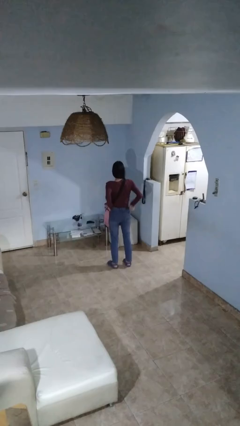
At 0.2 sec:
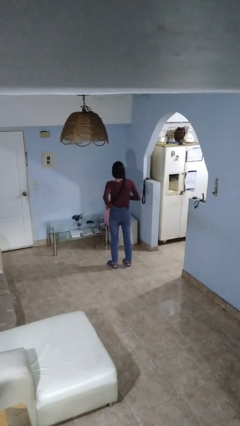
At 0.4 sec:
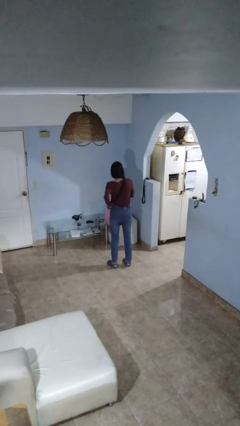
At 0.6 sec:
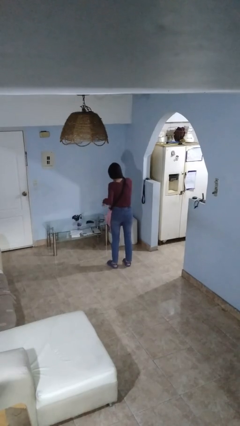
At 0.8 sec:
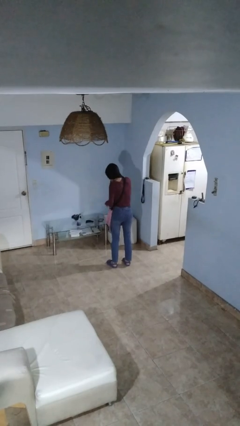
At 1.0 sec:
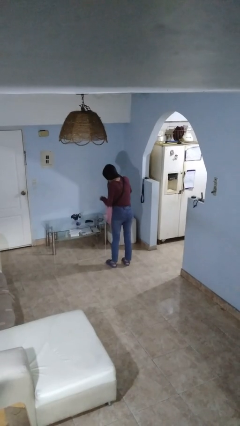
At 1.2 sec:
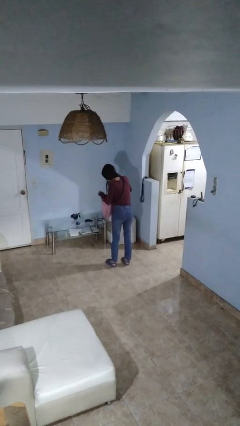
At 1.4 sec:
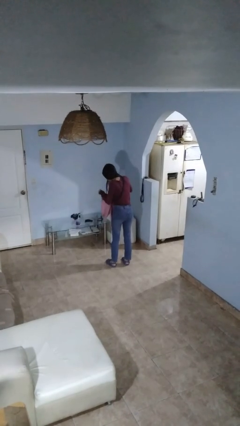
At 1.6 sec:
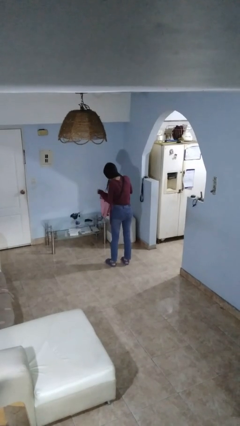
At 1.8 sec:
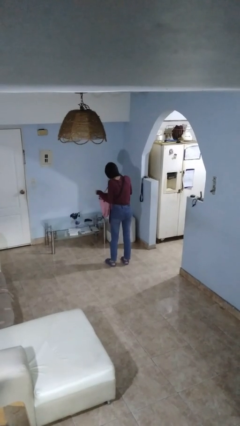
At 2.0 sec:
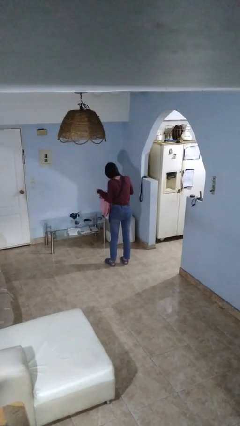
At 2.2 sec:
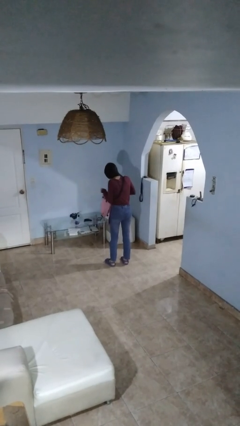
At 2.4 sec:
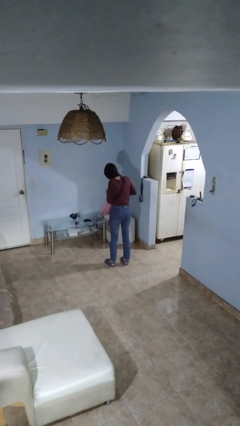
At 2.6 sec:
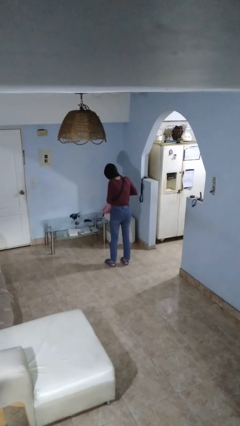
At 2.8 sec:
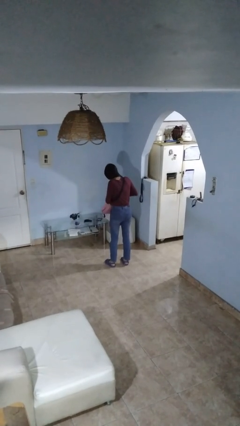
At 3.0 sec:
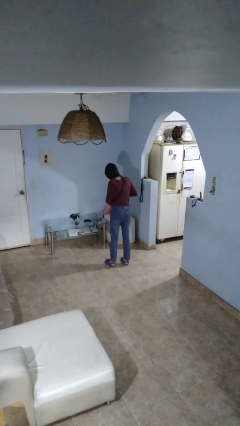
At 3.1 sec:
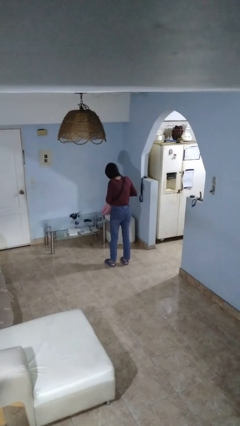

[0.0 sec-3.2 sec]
person searches in backpack

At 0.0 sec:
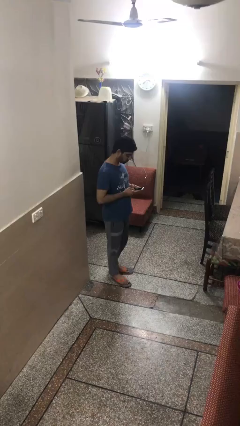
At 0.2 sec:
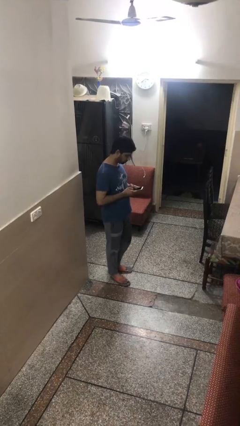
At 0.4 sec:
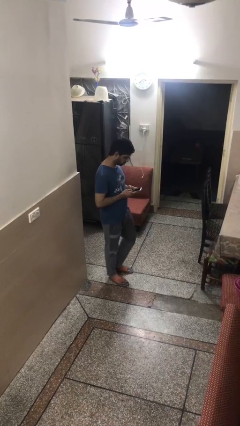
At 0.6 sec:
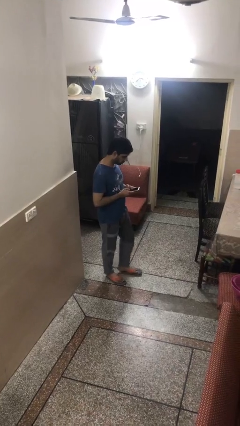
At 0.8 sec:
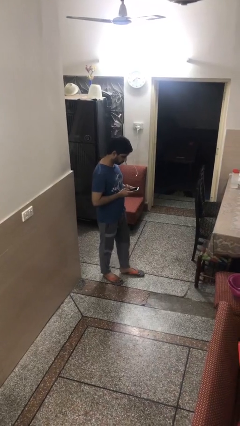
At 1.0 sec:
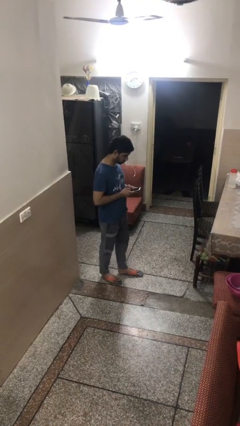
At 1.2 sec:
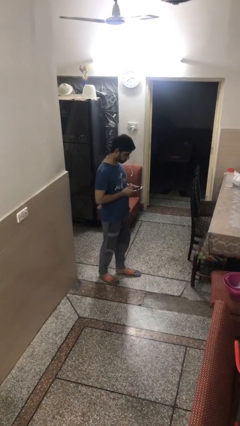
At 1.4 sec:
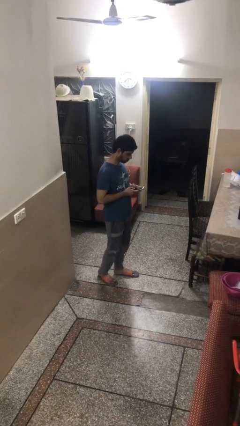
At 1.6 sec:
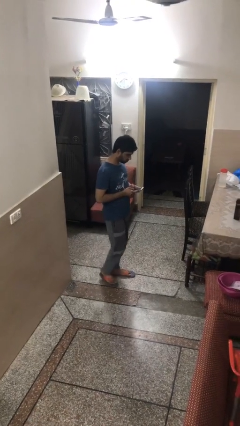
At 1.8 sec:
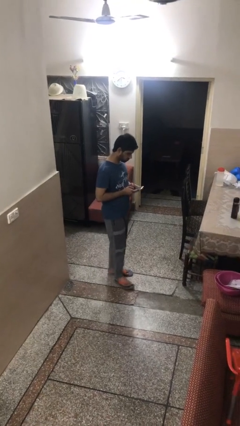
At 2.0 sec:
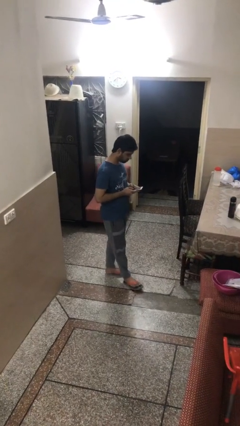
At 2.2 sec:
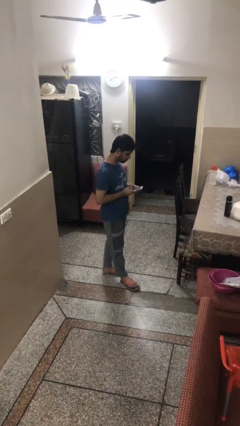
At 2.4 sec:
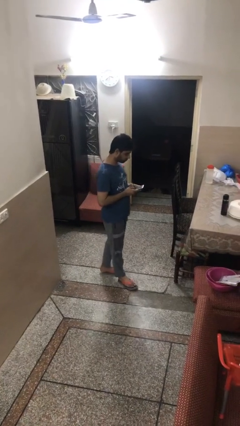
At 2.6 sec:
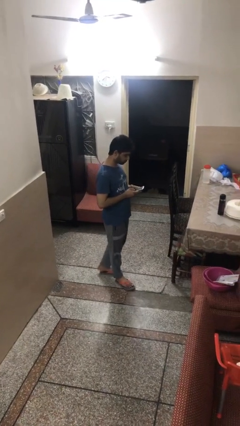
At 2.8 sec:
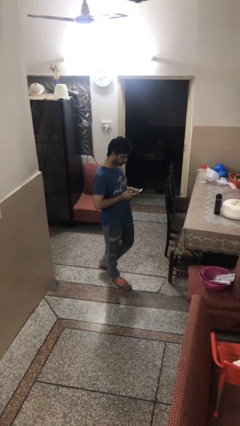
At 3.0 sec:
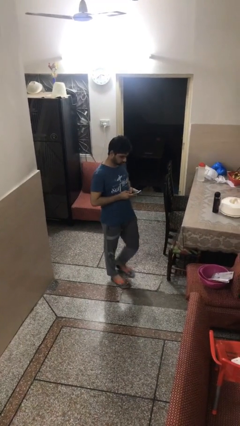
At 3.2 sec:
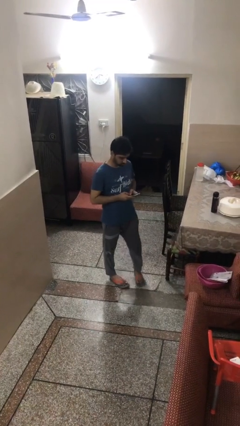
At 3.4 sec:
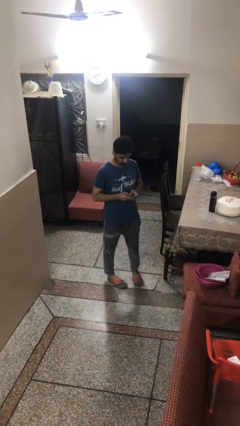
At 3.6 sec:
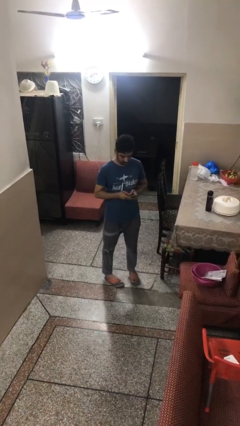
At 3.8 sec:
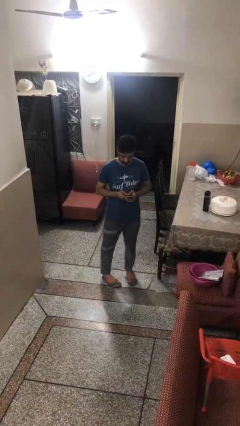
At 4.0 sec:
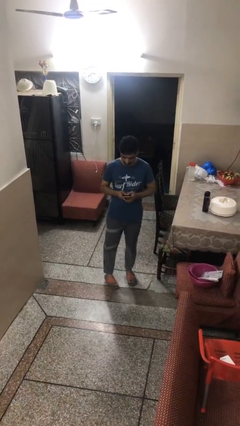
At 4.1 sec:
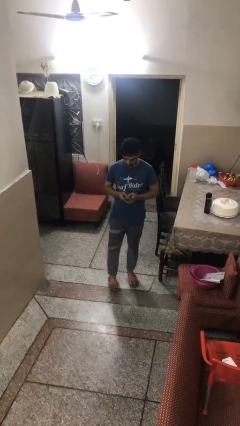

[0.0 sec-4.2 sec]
person texts on phone

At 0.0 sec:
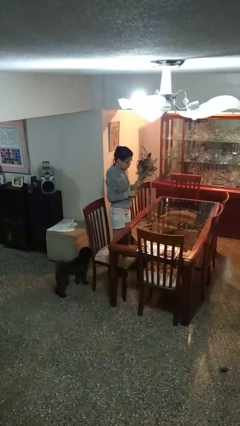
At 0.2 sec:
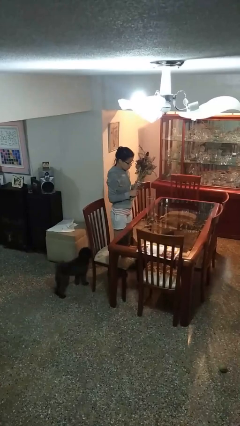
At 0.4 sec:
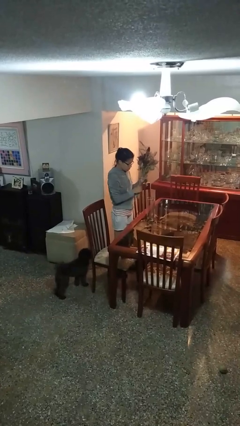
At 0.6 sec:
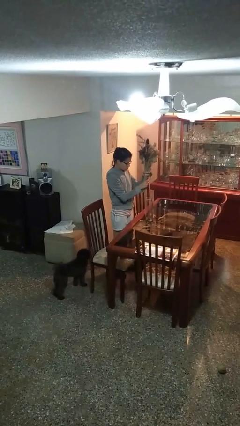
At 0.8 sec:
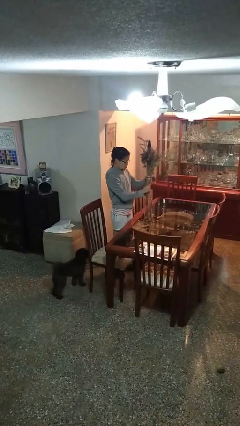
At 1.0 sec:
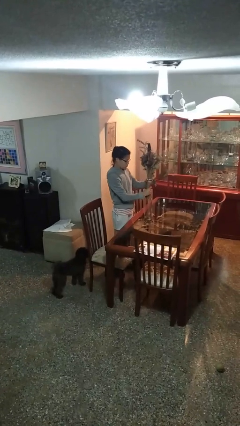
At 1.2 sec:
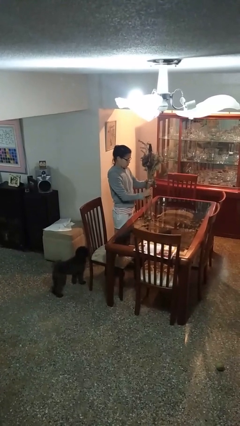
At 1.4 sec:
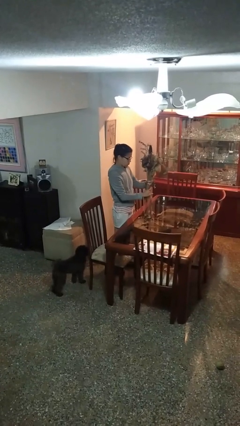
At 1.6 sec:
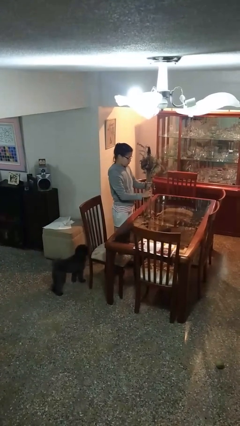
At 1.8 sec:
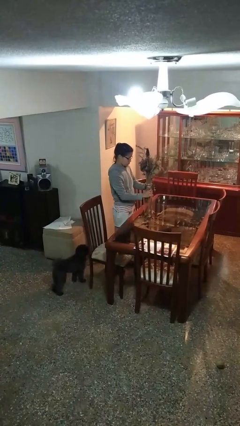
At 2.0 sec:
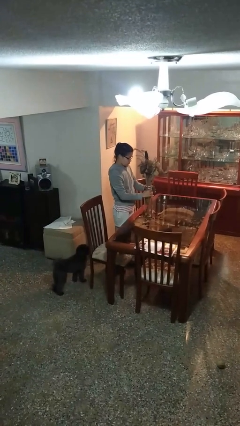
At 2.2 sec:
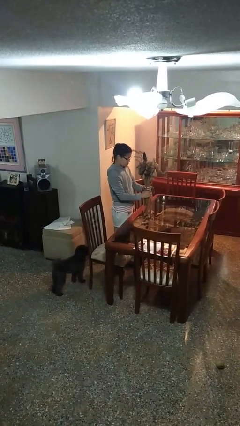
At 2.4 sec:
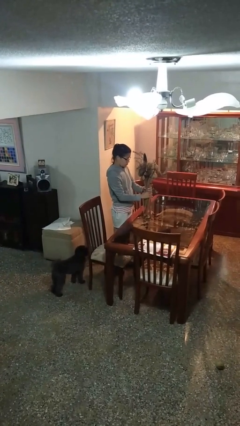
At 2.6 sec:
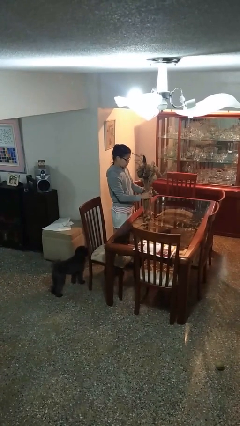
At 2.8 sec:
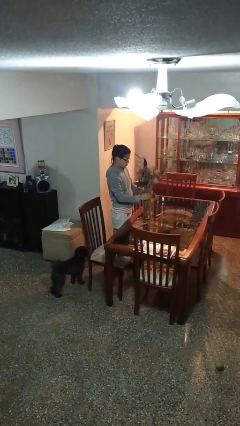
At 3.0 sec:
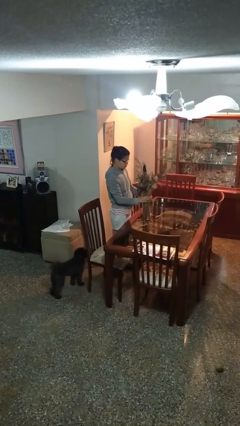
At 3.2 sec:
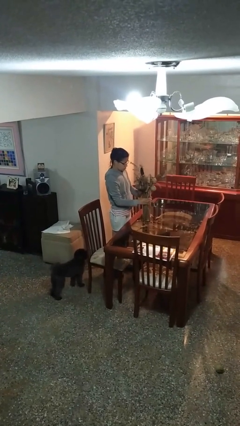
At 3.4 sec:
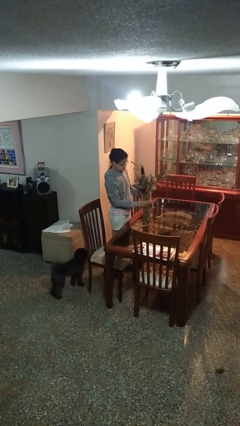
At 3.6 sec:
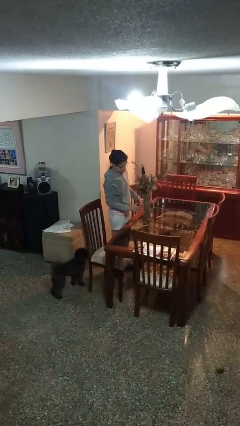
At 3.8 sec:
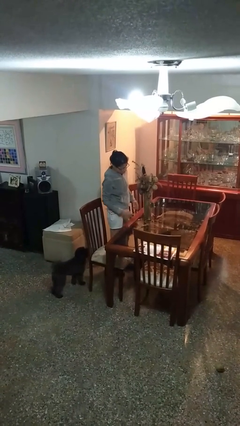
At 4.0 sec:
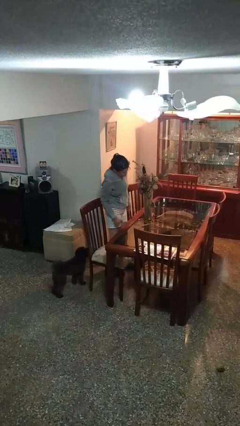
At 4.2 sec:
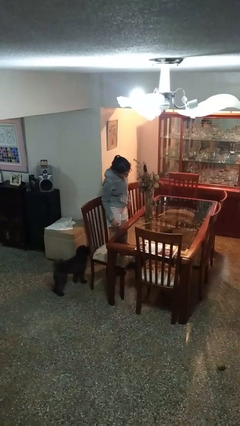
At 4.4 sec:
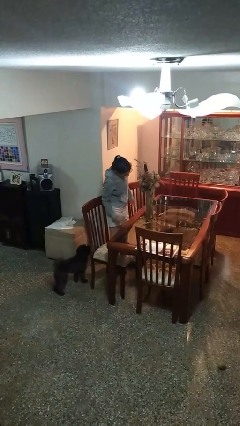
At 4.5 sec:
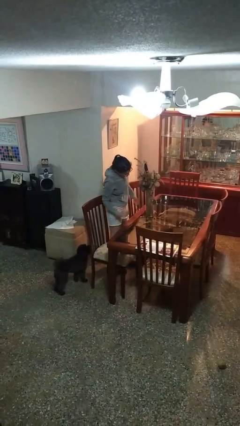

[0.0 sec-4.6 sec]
person arranges flowers in vase

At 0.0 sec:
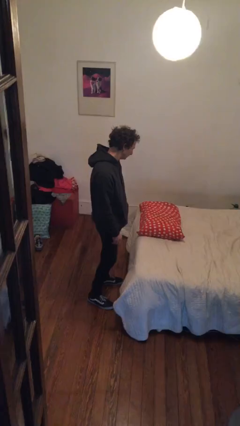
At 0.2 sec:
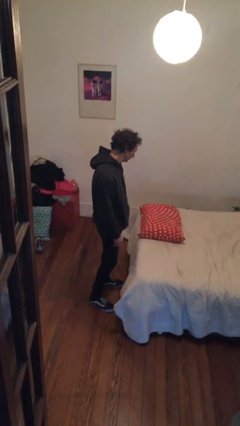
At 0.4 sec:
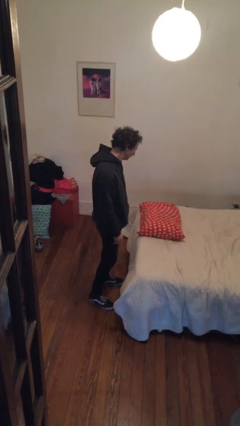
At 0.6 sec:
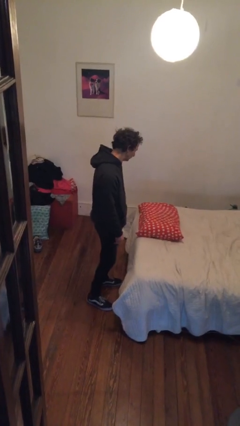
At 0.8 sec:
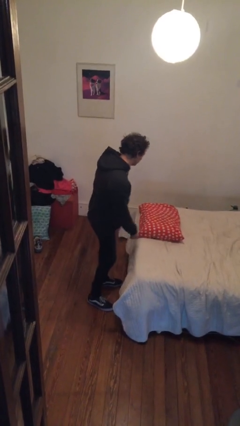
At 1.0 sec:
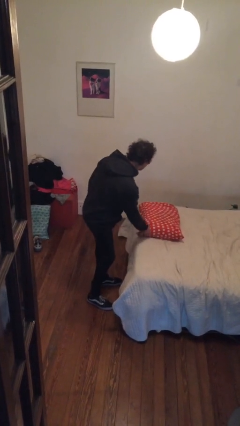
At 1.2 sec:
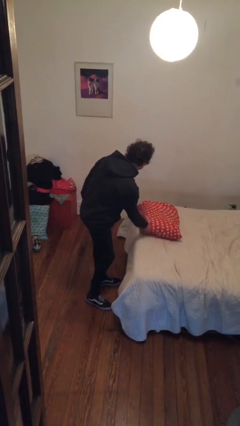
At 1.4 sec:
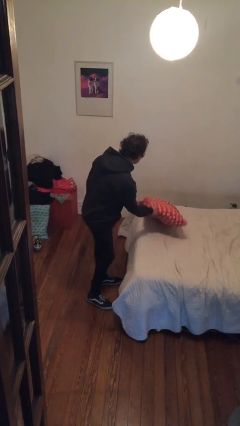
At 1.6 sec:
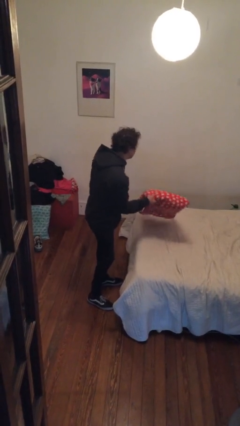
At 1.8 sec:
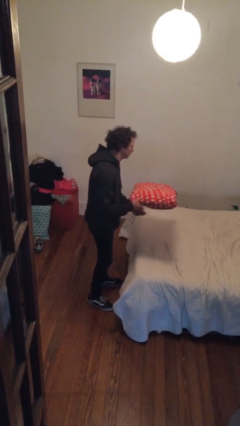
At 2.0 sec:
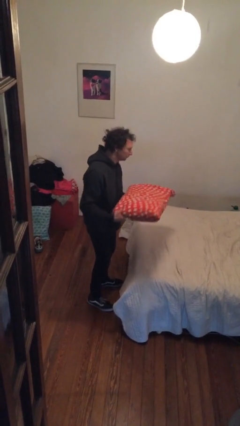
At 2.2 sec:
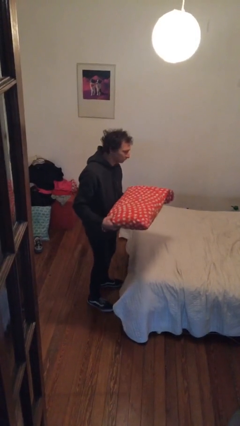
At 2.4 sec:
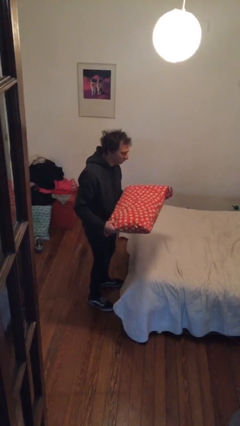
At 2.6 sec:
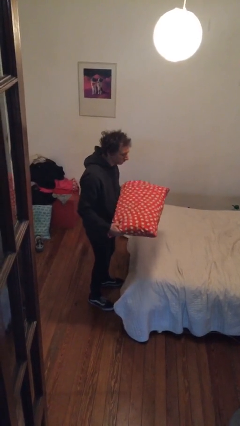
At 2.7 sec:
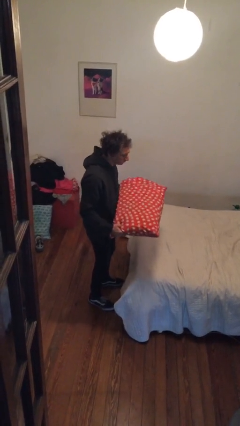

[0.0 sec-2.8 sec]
person picks up object from bed

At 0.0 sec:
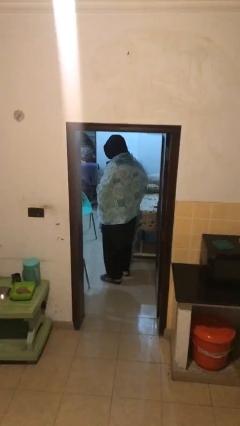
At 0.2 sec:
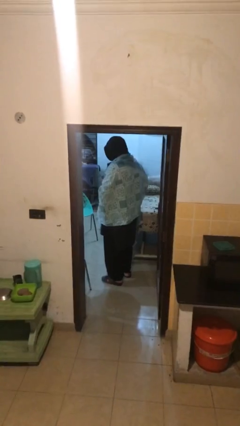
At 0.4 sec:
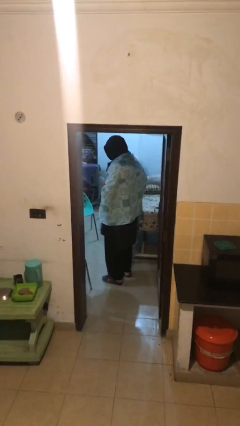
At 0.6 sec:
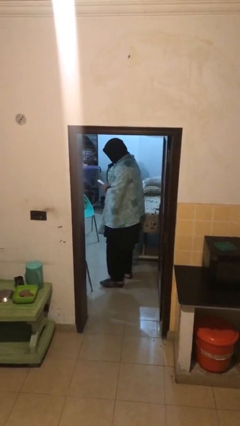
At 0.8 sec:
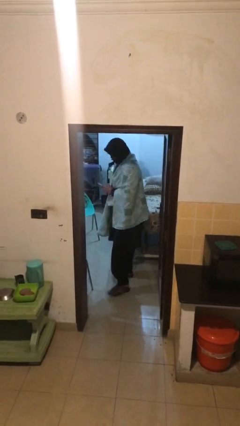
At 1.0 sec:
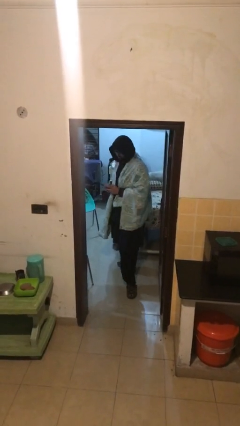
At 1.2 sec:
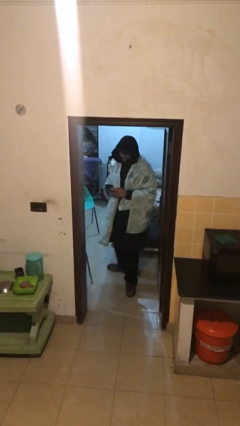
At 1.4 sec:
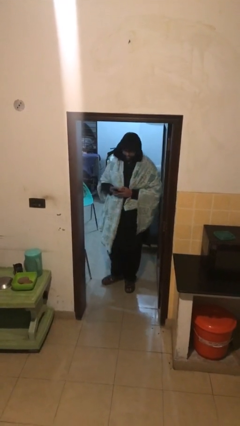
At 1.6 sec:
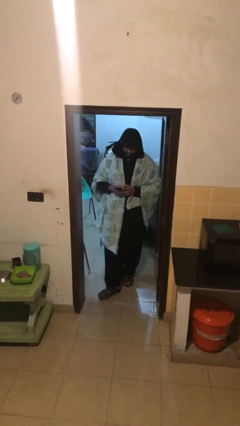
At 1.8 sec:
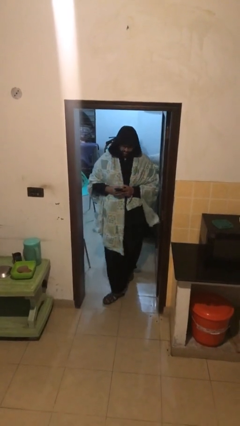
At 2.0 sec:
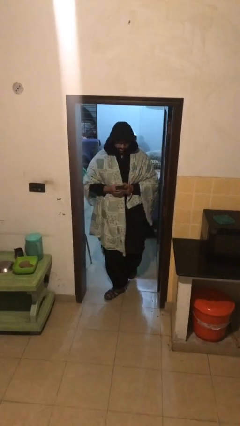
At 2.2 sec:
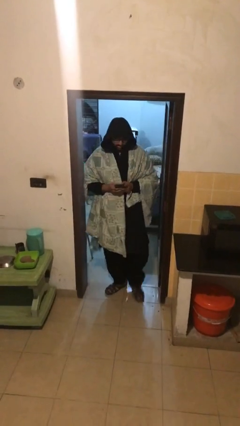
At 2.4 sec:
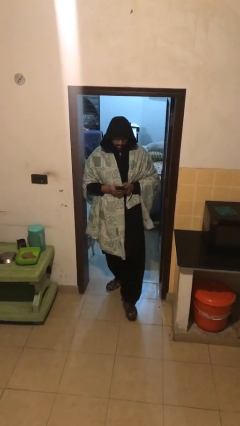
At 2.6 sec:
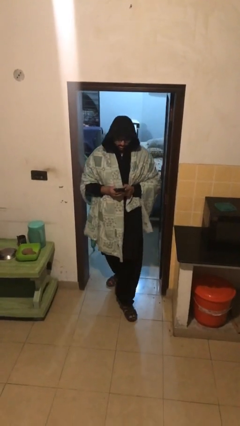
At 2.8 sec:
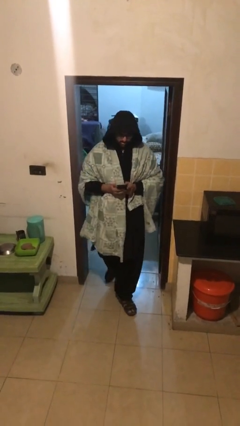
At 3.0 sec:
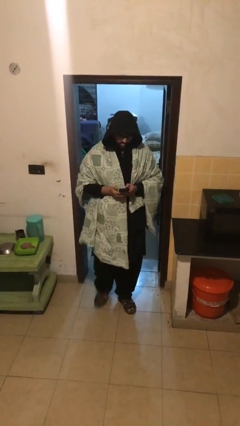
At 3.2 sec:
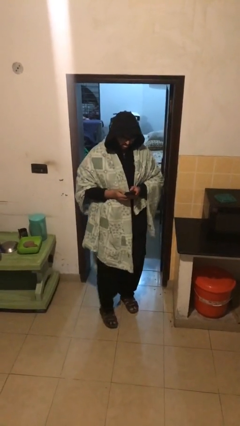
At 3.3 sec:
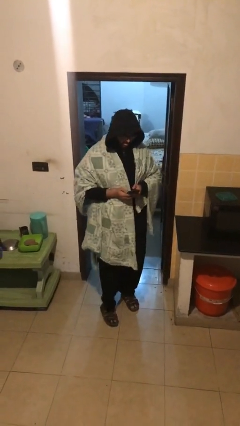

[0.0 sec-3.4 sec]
person enters scene through structure
